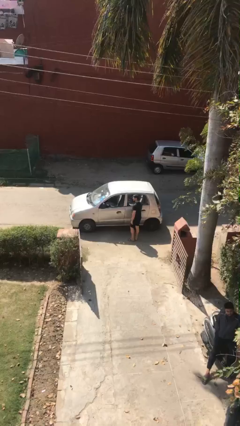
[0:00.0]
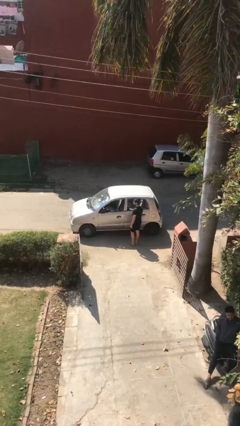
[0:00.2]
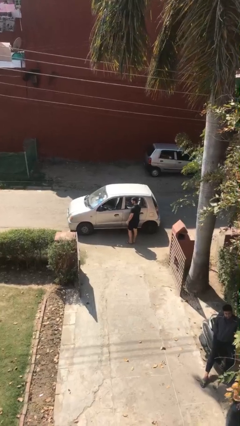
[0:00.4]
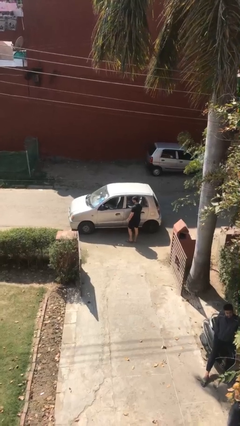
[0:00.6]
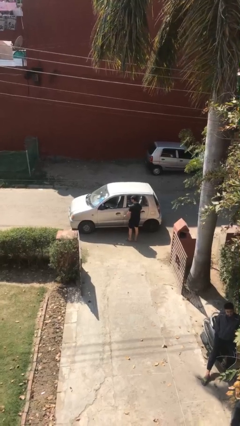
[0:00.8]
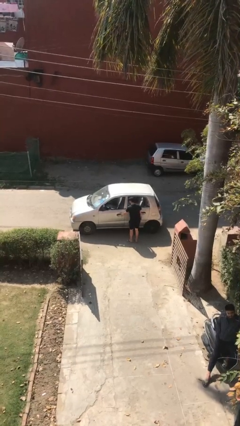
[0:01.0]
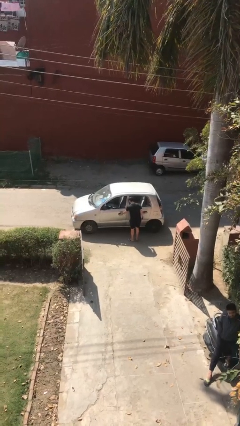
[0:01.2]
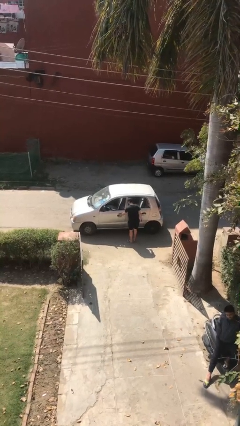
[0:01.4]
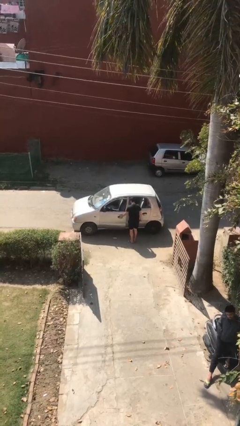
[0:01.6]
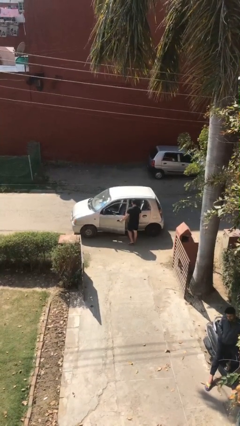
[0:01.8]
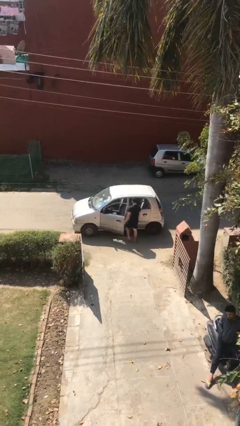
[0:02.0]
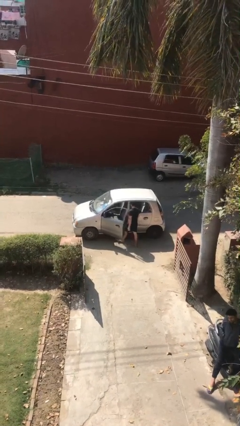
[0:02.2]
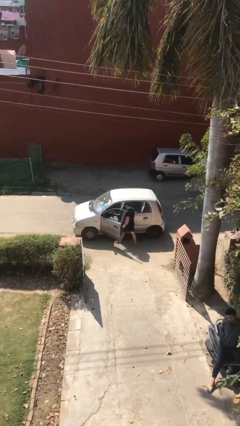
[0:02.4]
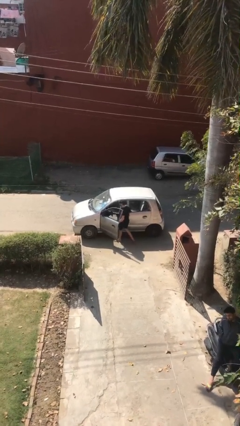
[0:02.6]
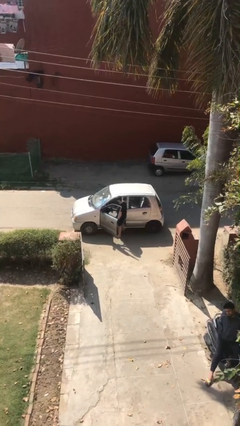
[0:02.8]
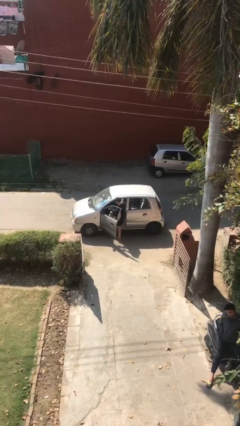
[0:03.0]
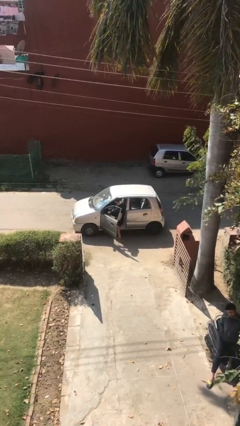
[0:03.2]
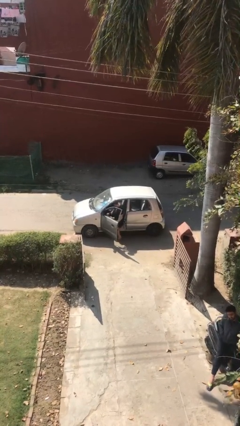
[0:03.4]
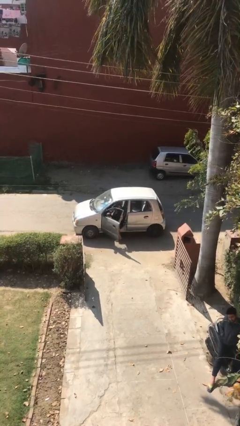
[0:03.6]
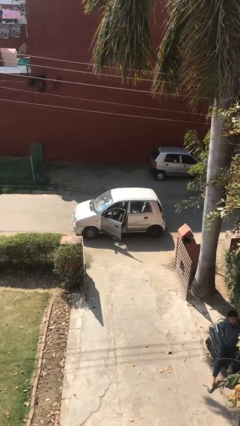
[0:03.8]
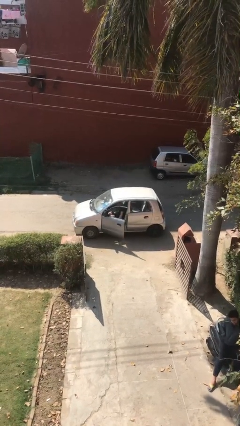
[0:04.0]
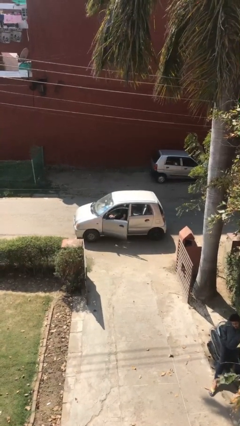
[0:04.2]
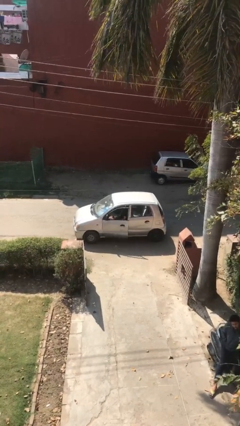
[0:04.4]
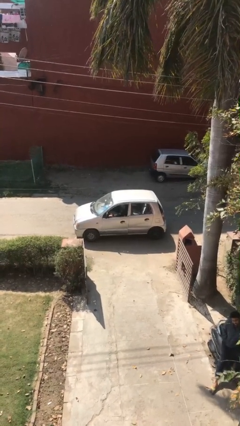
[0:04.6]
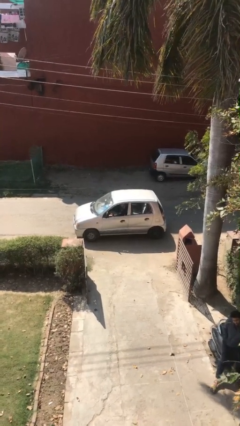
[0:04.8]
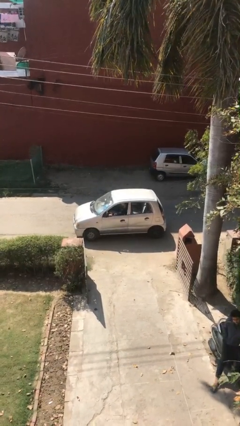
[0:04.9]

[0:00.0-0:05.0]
car picks up person

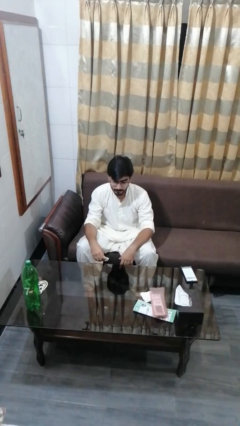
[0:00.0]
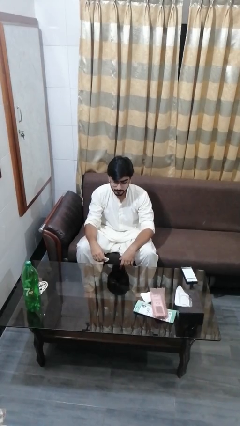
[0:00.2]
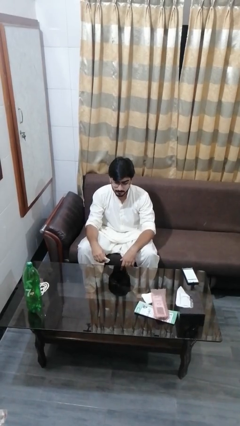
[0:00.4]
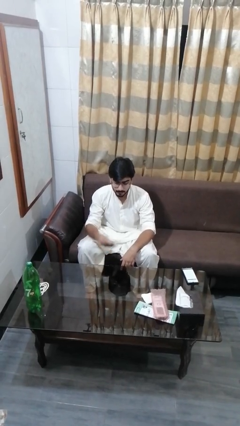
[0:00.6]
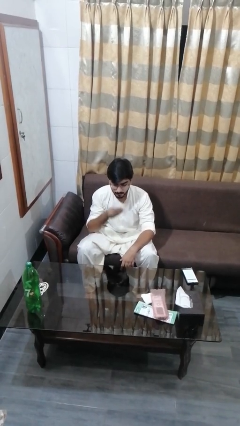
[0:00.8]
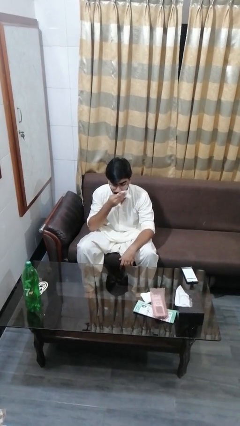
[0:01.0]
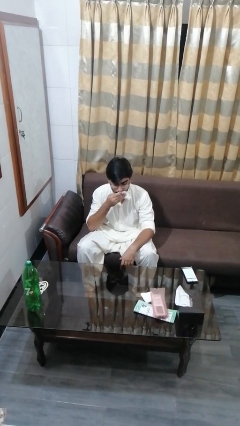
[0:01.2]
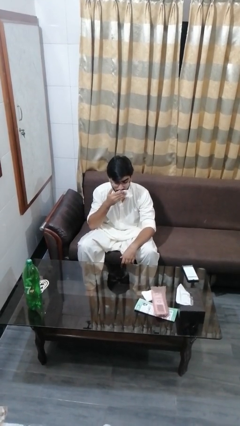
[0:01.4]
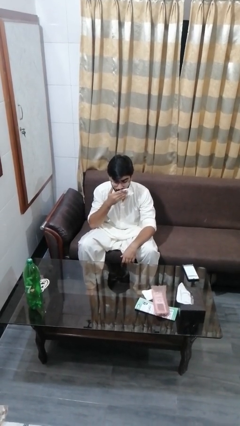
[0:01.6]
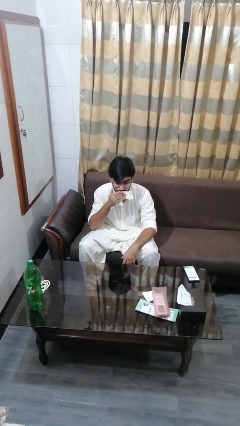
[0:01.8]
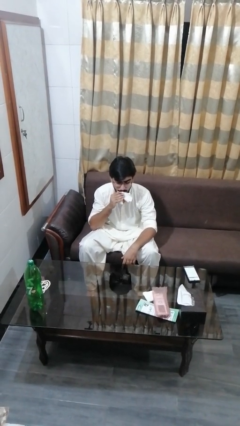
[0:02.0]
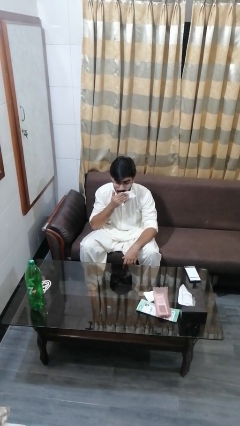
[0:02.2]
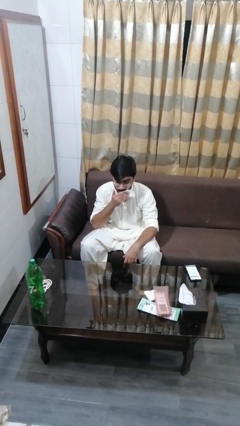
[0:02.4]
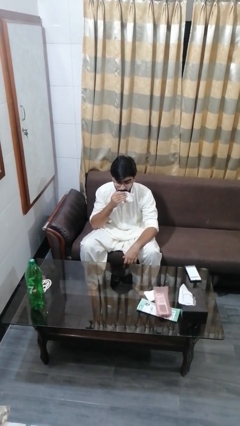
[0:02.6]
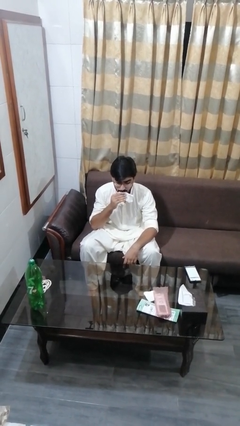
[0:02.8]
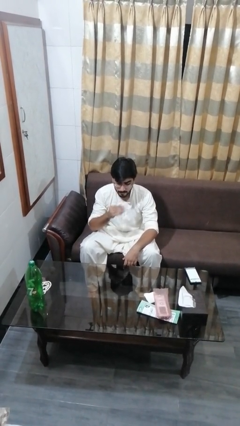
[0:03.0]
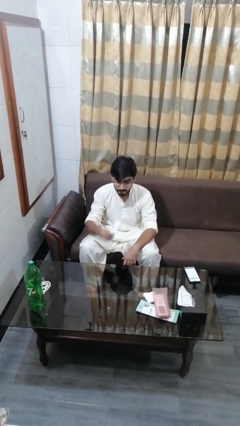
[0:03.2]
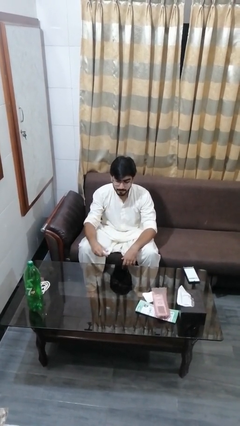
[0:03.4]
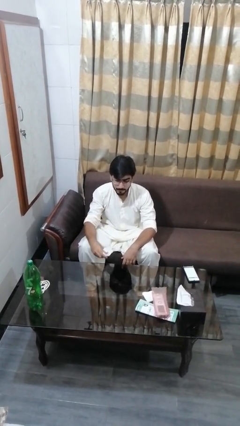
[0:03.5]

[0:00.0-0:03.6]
person wipes mouth with napkin

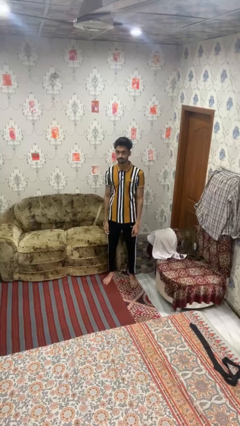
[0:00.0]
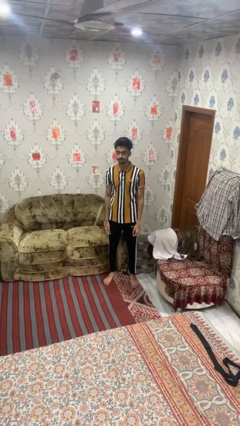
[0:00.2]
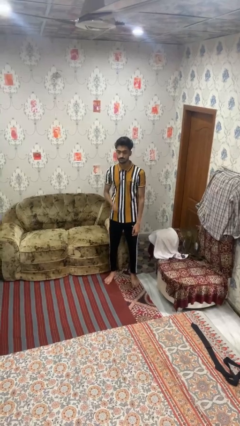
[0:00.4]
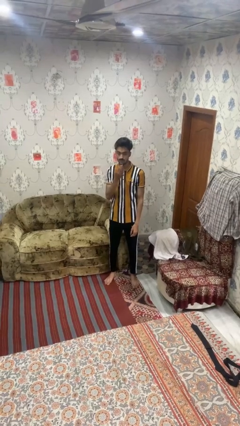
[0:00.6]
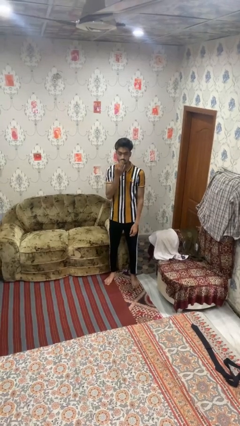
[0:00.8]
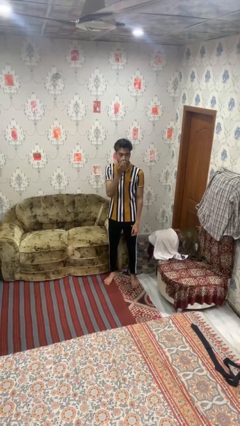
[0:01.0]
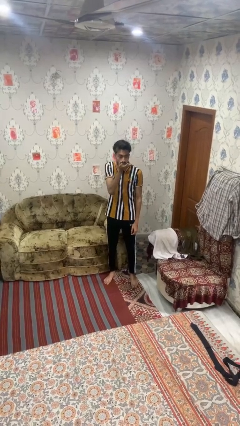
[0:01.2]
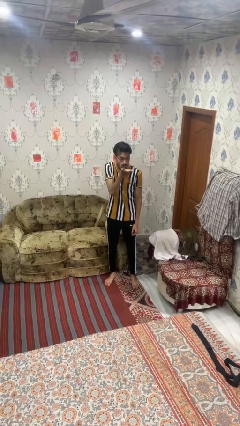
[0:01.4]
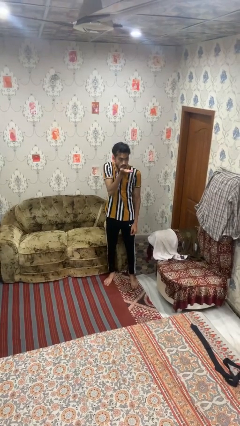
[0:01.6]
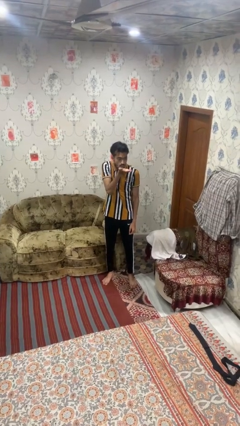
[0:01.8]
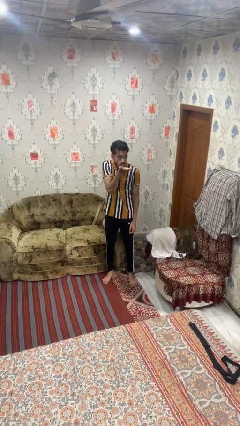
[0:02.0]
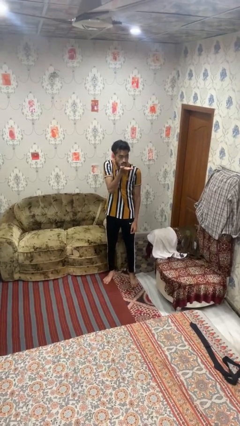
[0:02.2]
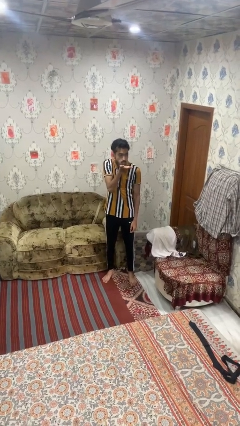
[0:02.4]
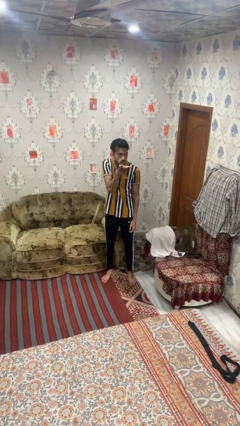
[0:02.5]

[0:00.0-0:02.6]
person gestures blow kiss

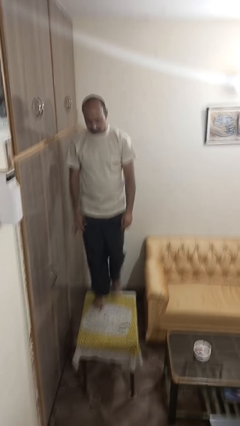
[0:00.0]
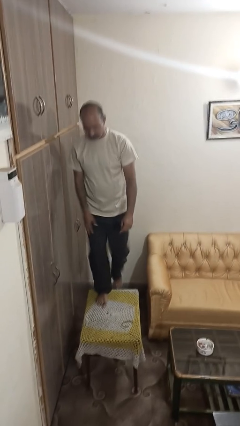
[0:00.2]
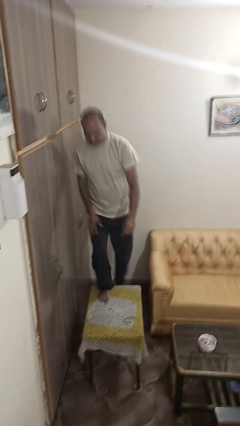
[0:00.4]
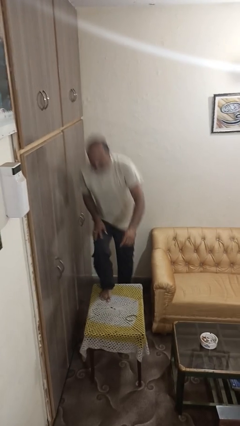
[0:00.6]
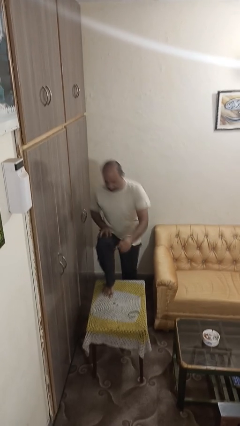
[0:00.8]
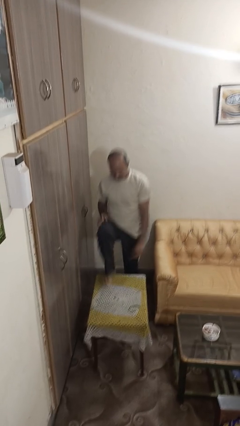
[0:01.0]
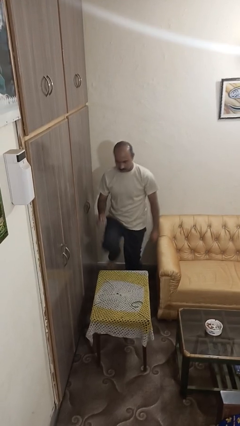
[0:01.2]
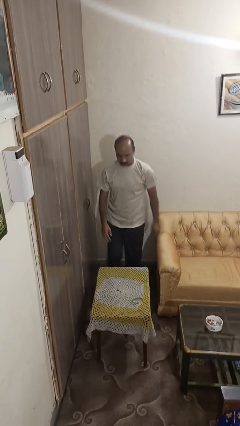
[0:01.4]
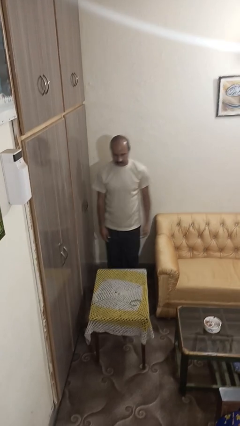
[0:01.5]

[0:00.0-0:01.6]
person climbs off table

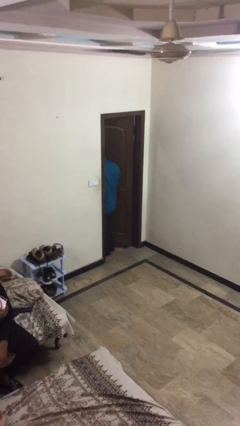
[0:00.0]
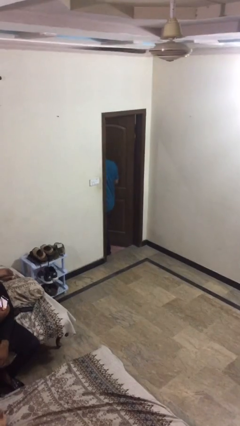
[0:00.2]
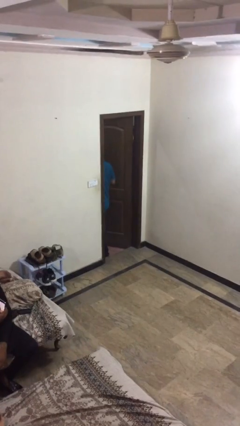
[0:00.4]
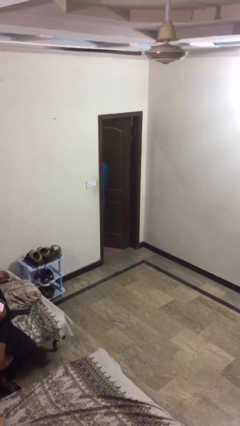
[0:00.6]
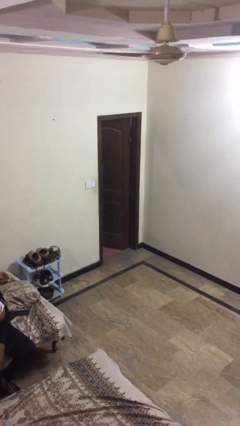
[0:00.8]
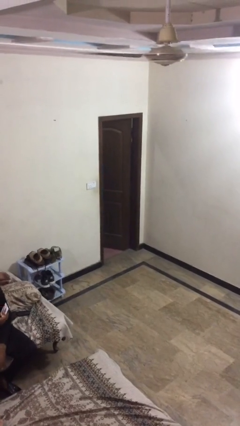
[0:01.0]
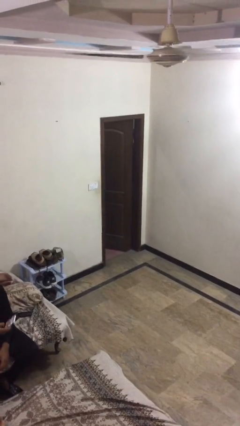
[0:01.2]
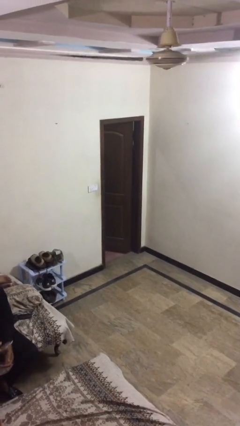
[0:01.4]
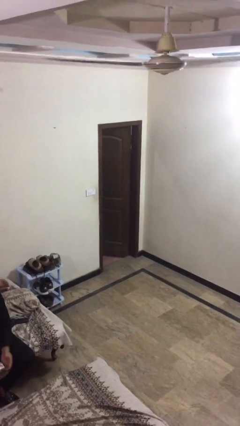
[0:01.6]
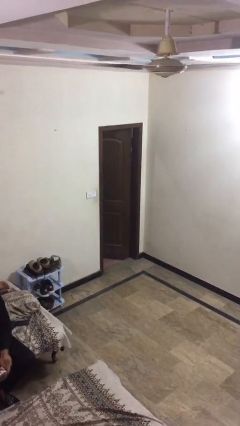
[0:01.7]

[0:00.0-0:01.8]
person exits scene through structure

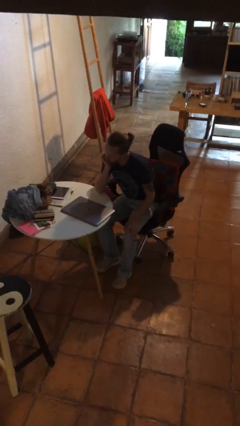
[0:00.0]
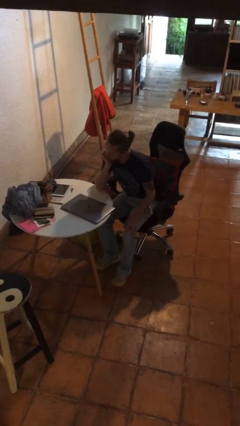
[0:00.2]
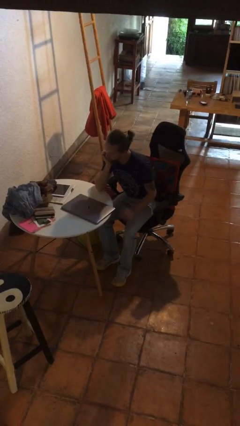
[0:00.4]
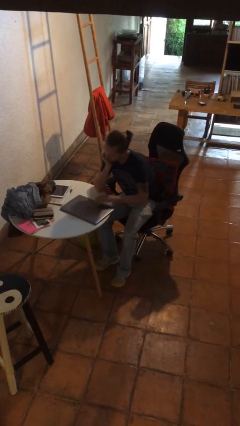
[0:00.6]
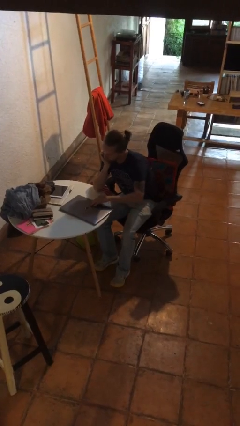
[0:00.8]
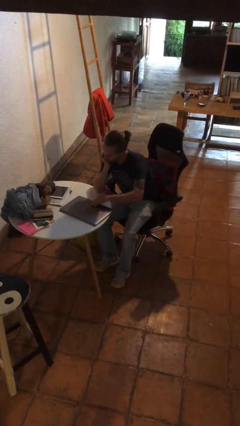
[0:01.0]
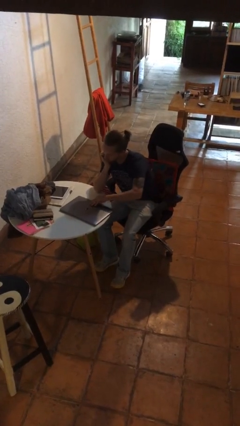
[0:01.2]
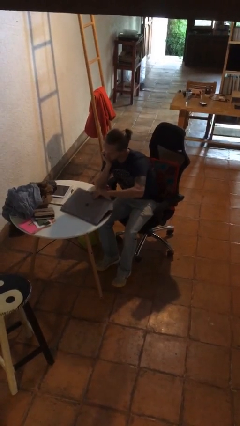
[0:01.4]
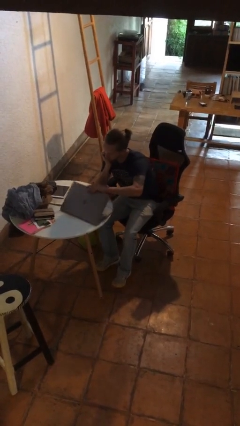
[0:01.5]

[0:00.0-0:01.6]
person opens laptop

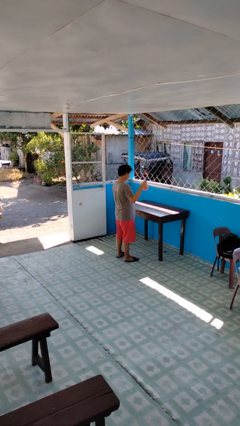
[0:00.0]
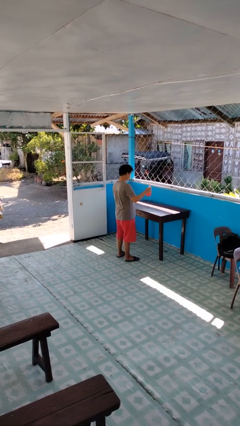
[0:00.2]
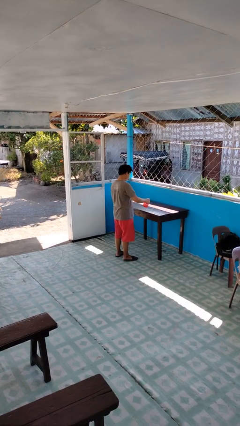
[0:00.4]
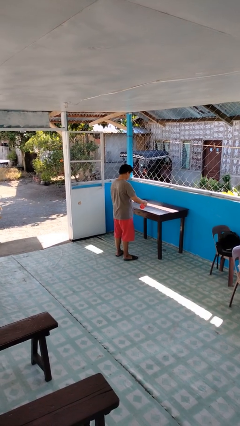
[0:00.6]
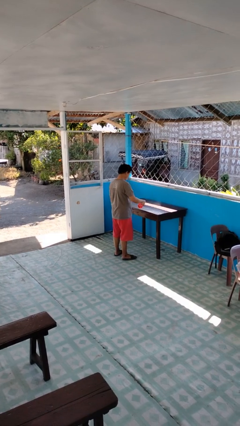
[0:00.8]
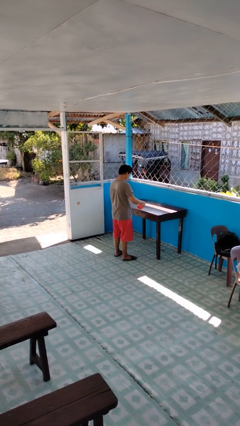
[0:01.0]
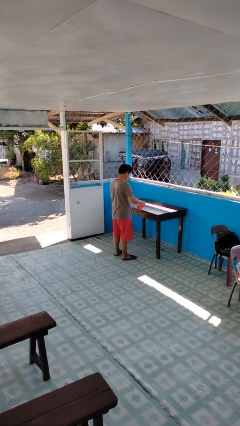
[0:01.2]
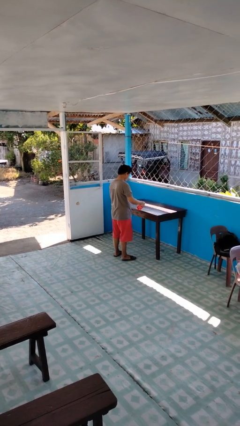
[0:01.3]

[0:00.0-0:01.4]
person sprays from bottle
